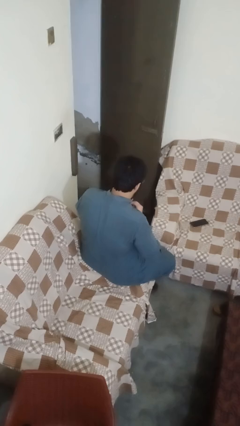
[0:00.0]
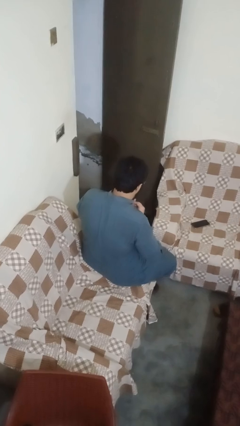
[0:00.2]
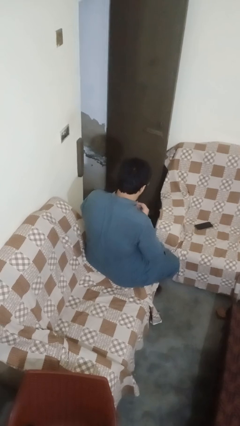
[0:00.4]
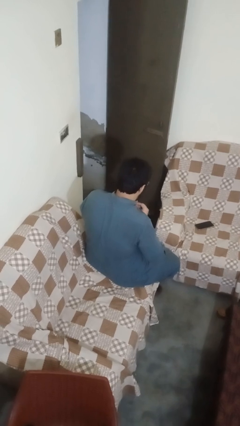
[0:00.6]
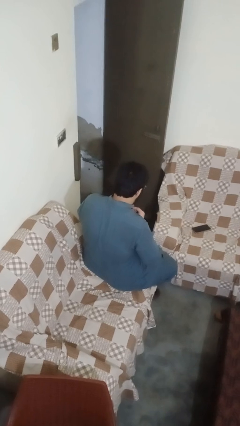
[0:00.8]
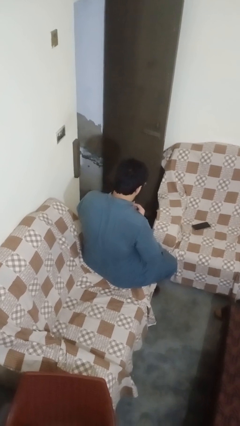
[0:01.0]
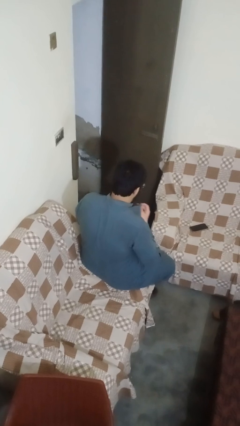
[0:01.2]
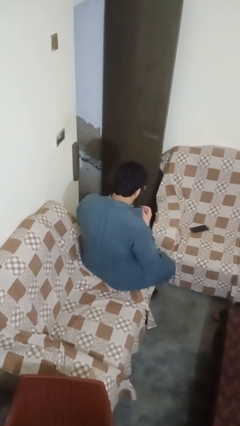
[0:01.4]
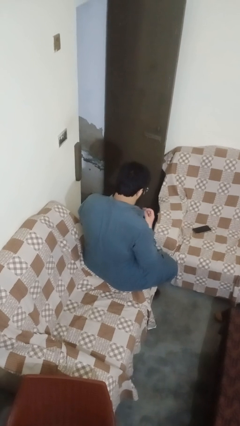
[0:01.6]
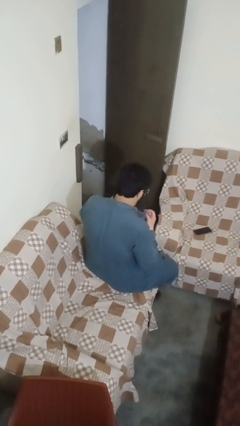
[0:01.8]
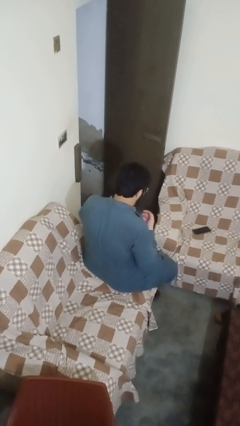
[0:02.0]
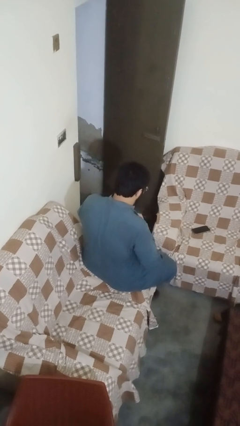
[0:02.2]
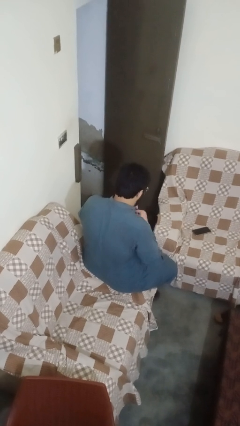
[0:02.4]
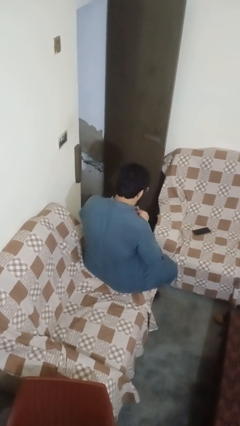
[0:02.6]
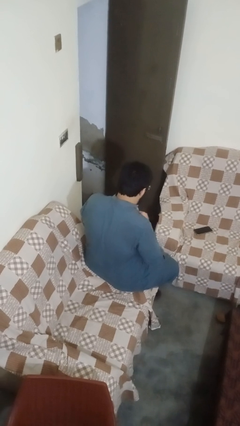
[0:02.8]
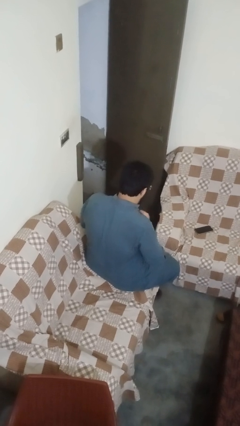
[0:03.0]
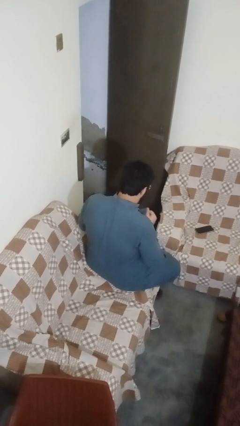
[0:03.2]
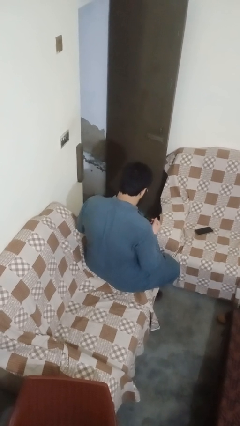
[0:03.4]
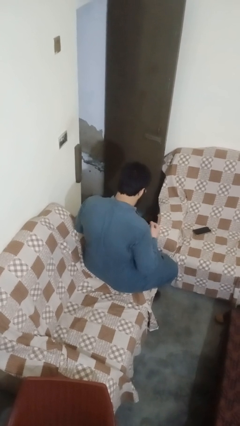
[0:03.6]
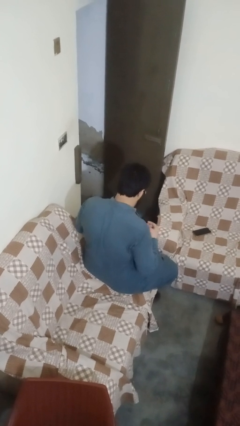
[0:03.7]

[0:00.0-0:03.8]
person unbuttons shirt

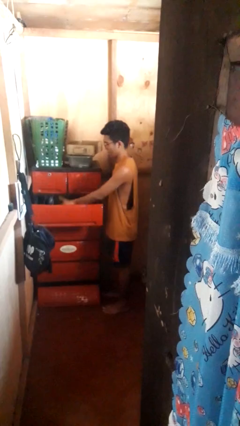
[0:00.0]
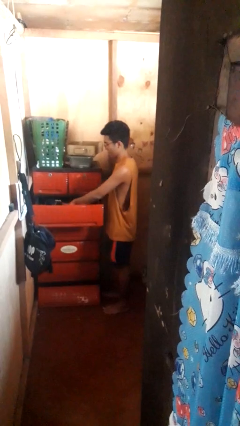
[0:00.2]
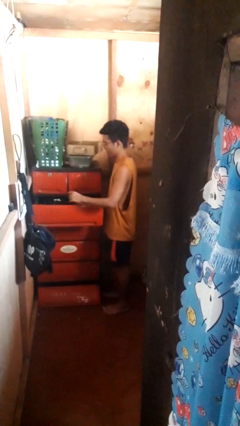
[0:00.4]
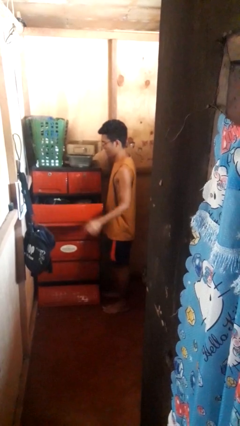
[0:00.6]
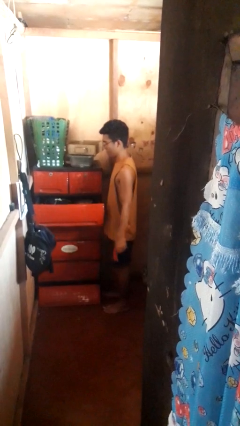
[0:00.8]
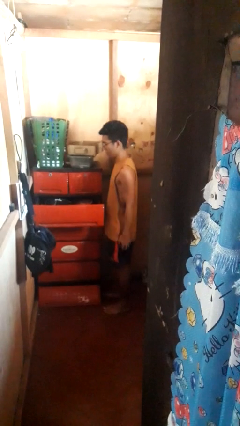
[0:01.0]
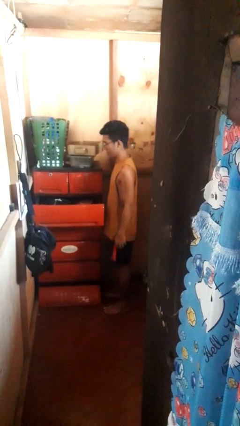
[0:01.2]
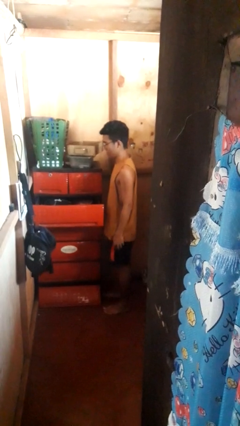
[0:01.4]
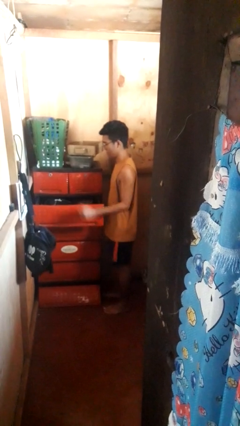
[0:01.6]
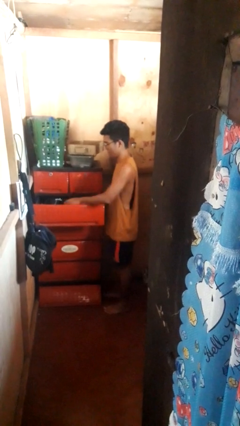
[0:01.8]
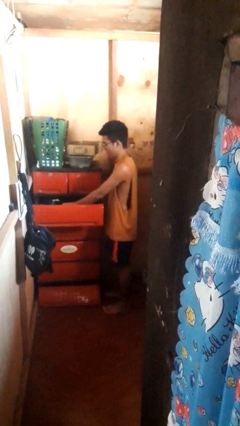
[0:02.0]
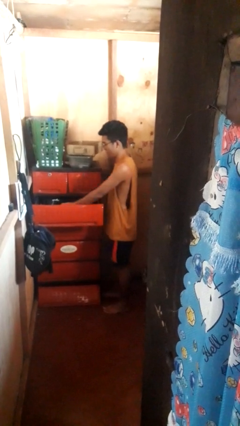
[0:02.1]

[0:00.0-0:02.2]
person puts clothes into dresser

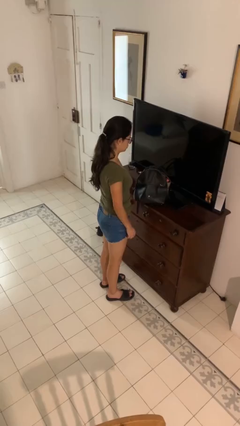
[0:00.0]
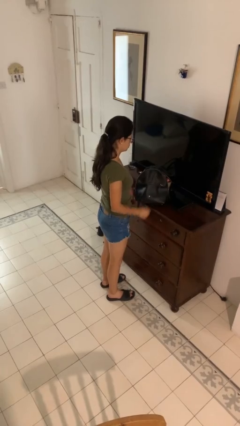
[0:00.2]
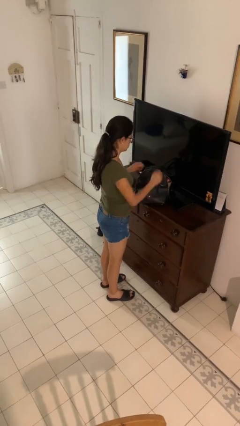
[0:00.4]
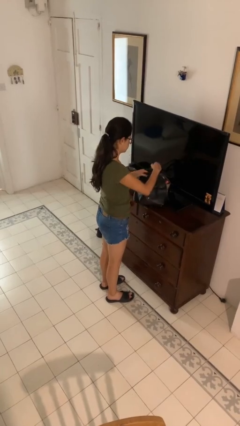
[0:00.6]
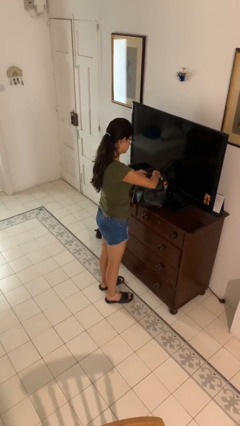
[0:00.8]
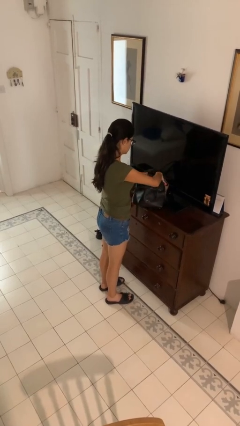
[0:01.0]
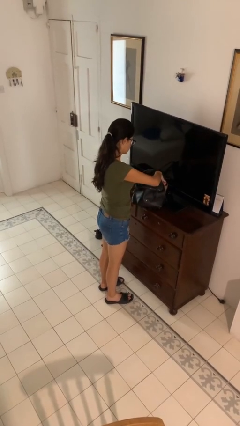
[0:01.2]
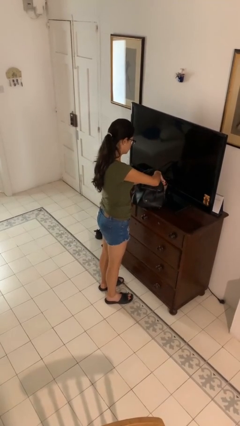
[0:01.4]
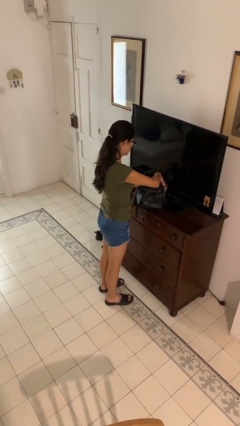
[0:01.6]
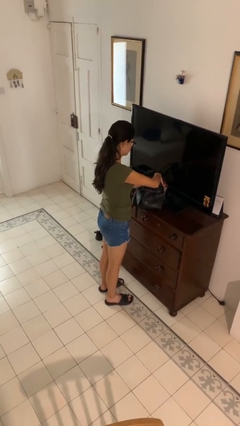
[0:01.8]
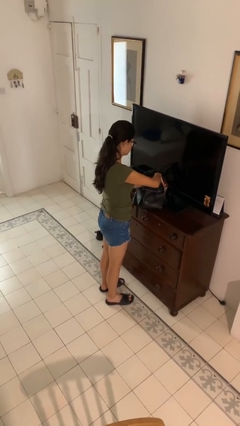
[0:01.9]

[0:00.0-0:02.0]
person searches in purse

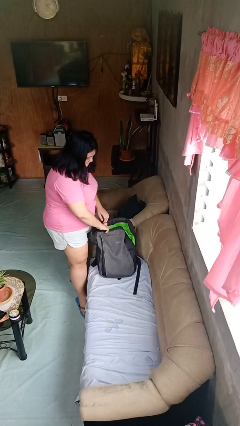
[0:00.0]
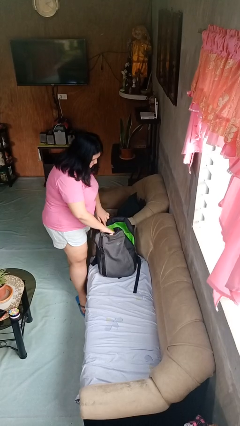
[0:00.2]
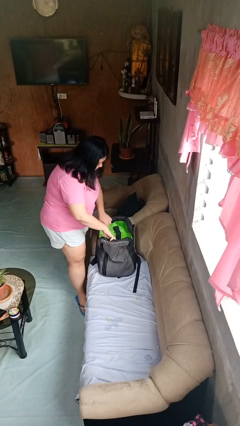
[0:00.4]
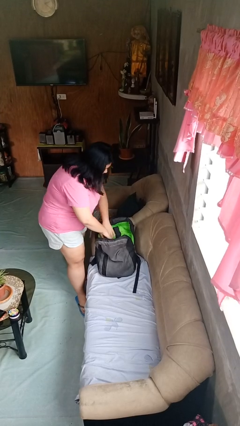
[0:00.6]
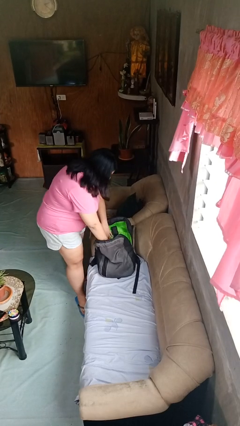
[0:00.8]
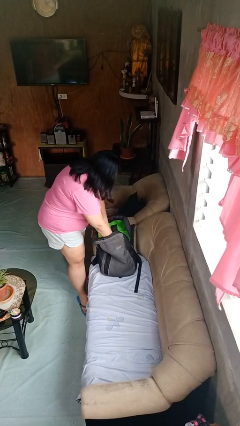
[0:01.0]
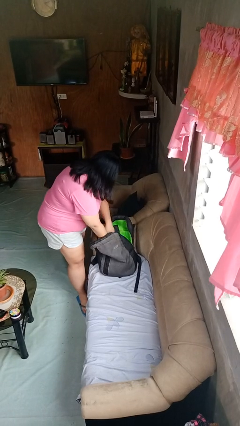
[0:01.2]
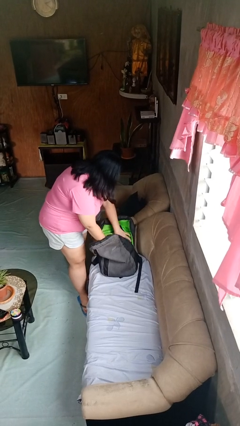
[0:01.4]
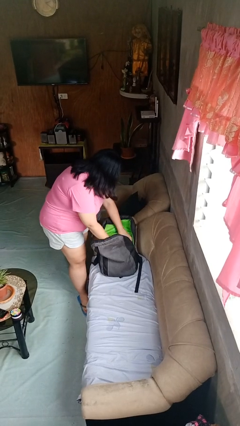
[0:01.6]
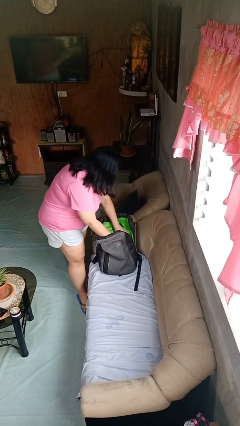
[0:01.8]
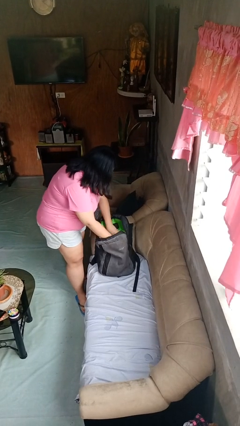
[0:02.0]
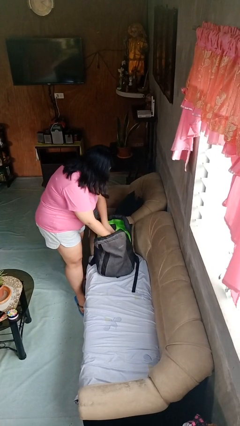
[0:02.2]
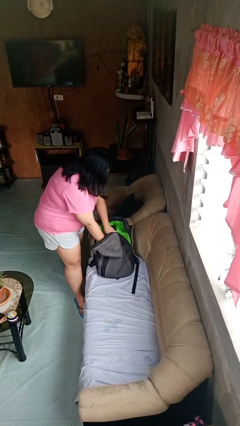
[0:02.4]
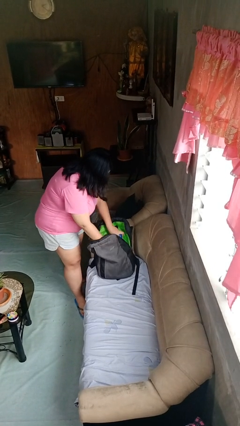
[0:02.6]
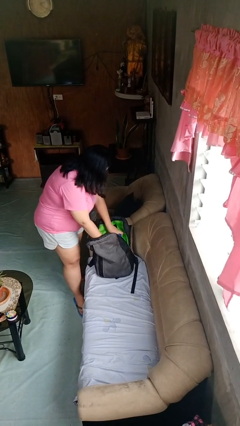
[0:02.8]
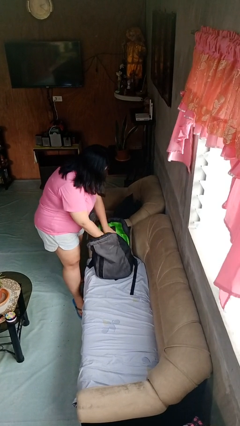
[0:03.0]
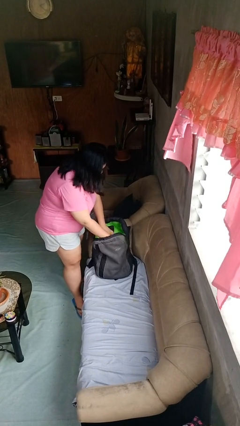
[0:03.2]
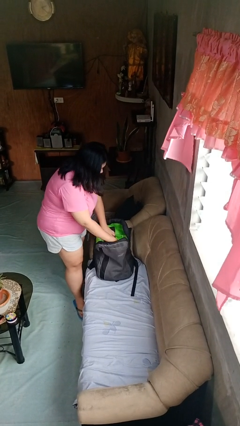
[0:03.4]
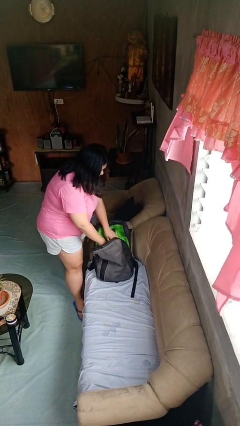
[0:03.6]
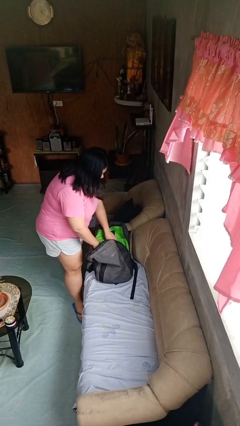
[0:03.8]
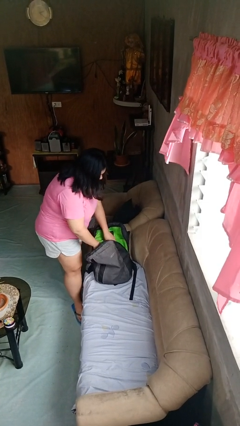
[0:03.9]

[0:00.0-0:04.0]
person searches in backpack

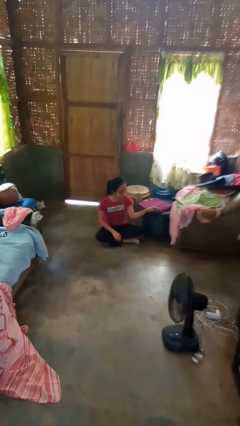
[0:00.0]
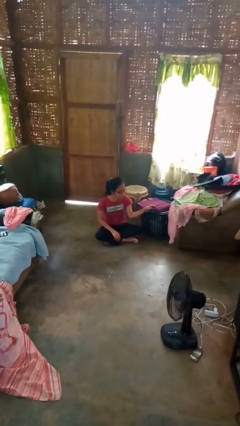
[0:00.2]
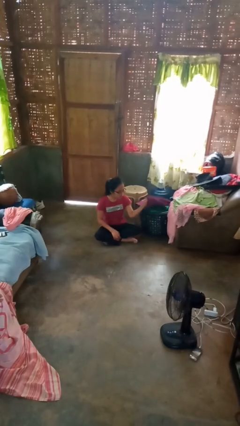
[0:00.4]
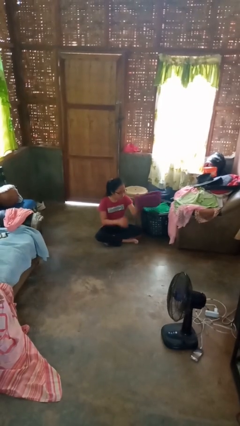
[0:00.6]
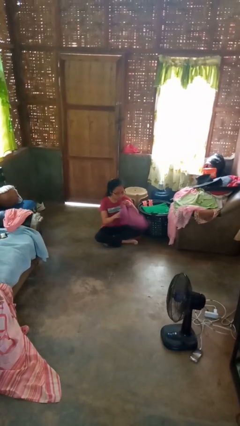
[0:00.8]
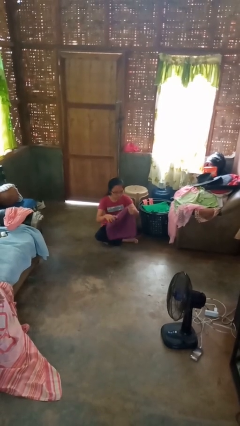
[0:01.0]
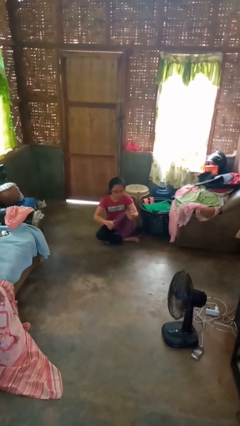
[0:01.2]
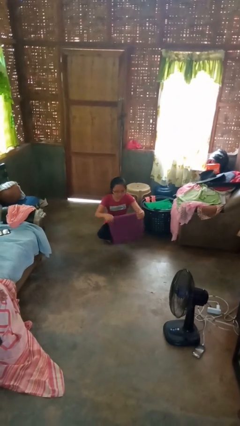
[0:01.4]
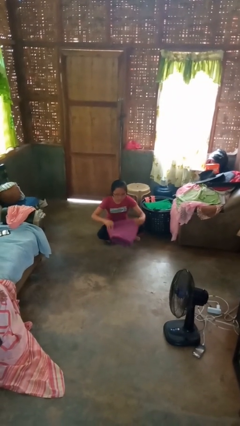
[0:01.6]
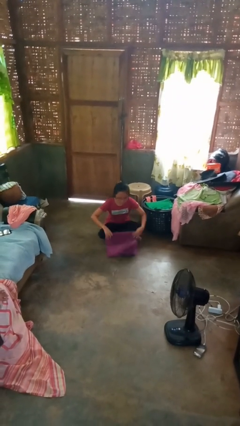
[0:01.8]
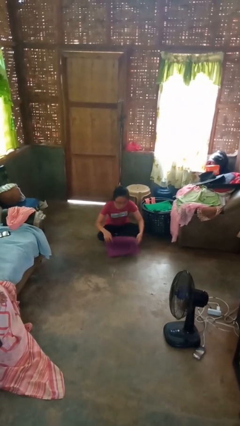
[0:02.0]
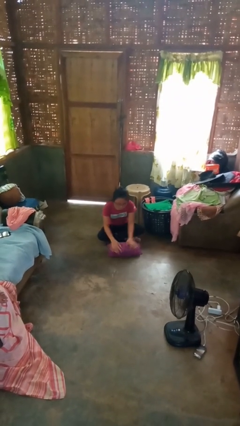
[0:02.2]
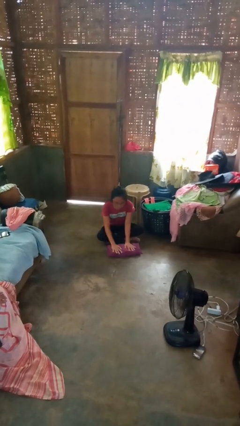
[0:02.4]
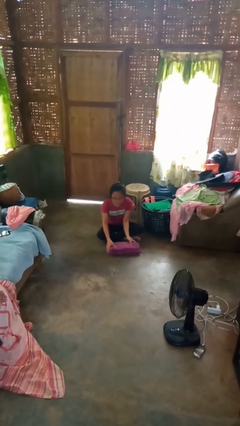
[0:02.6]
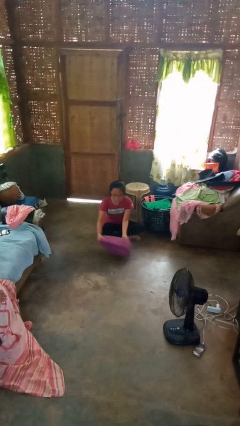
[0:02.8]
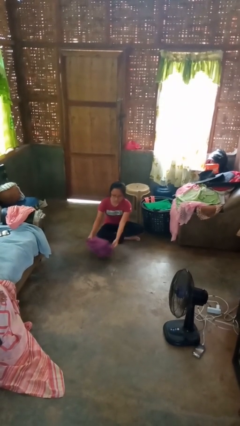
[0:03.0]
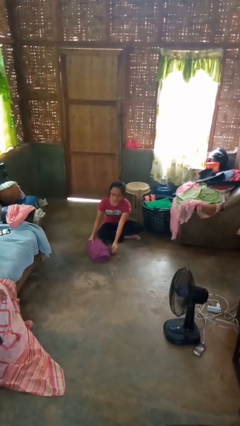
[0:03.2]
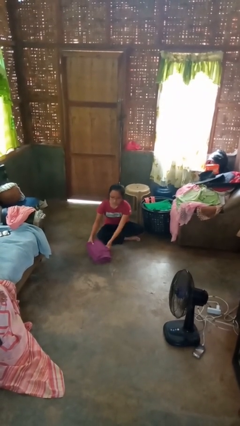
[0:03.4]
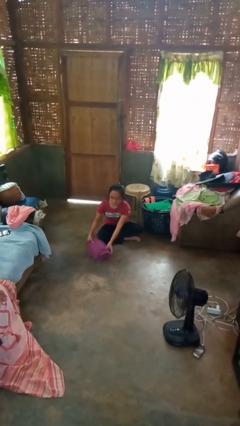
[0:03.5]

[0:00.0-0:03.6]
person folds towel

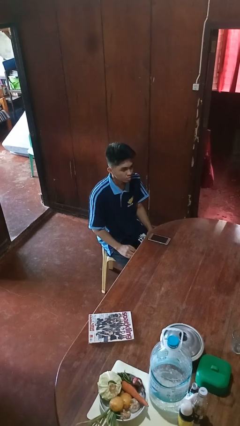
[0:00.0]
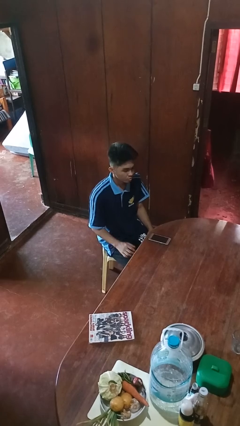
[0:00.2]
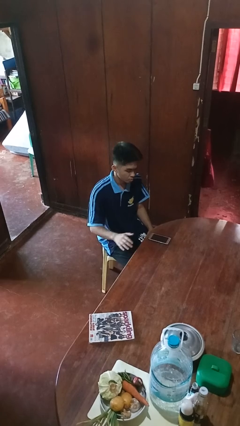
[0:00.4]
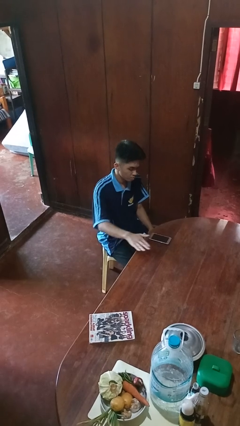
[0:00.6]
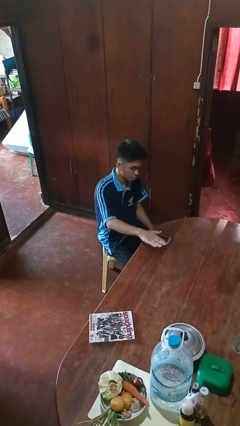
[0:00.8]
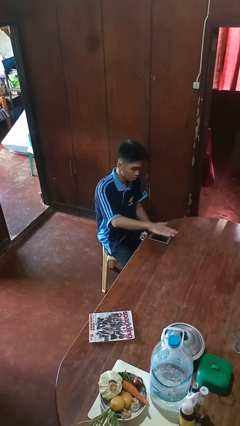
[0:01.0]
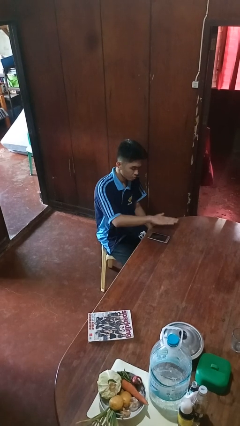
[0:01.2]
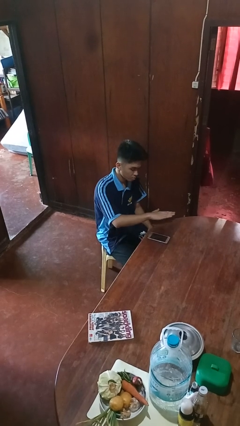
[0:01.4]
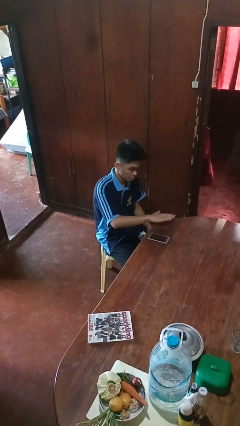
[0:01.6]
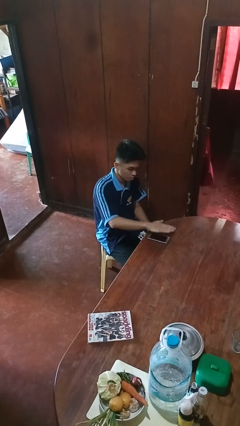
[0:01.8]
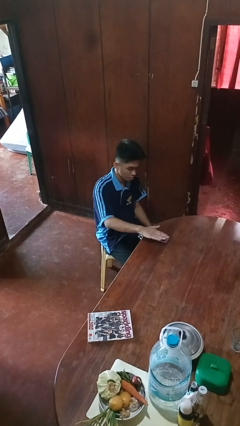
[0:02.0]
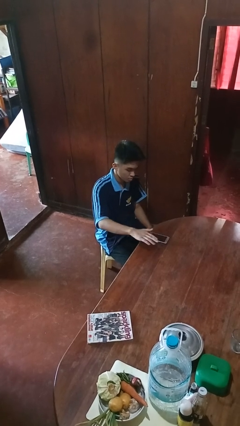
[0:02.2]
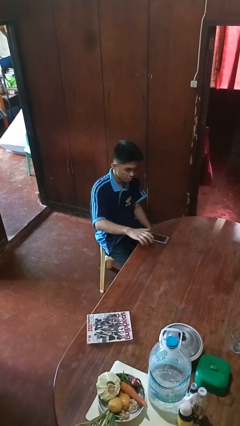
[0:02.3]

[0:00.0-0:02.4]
person waves hand over object
